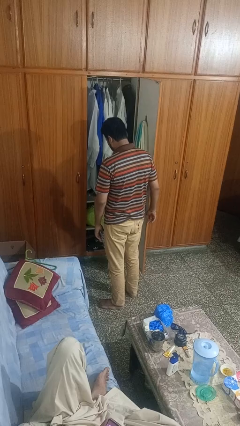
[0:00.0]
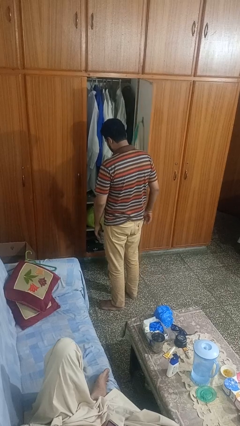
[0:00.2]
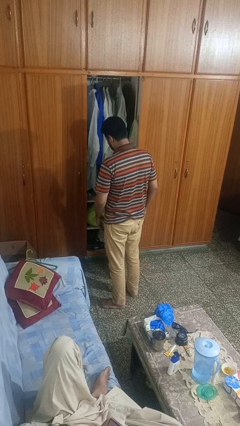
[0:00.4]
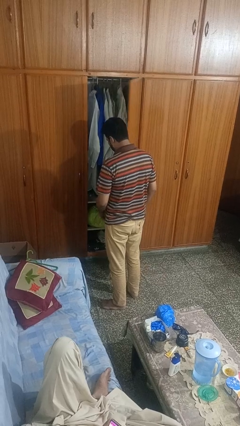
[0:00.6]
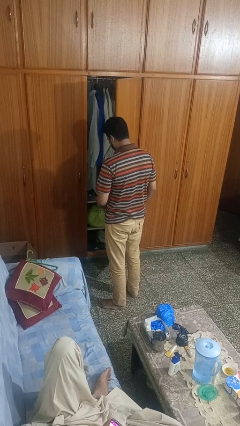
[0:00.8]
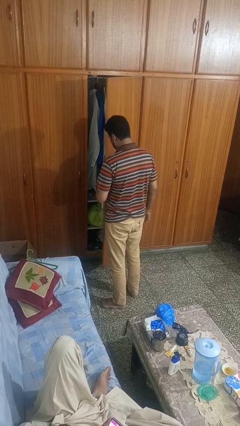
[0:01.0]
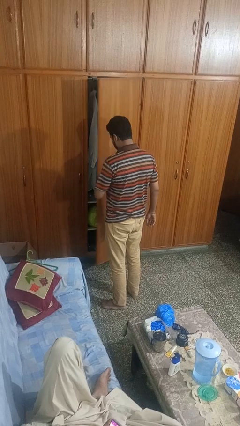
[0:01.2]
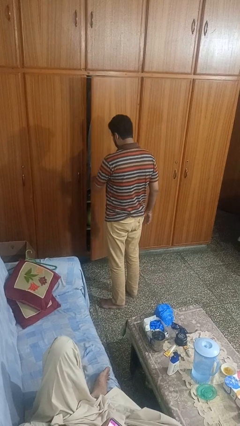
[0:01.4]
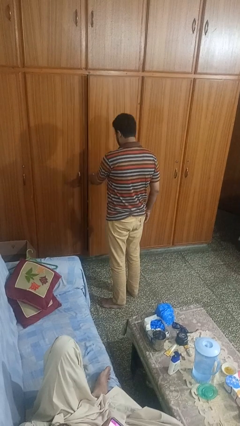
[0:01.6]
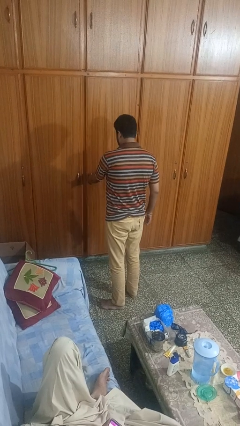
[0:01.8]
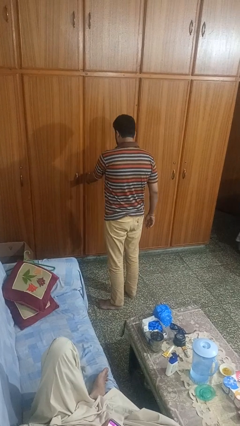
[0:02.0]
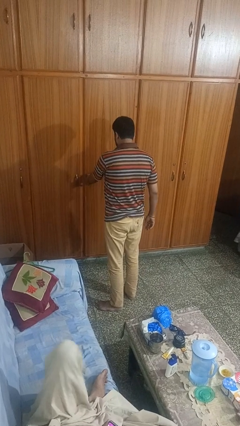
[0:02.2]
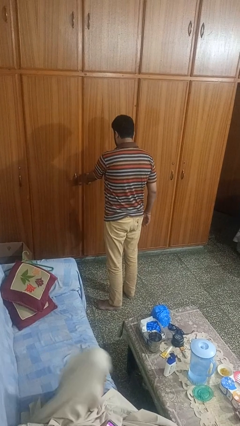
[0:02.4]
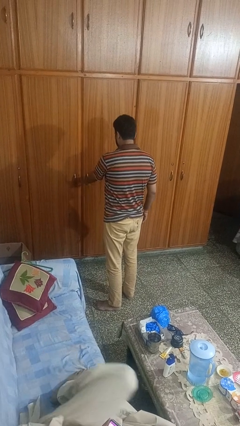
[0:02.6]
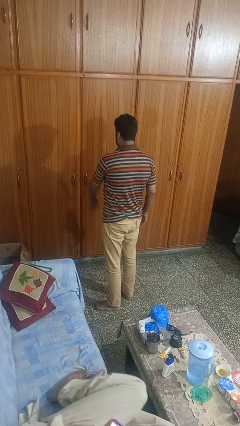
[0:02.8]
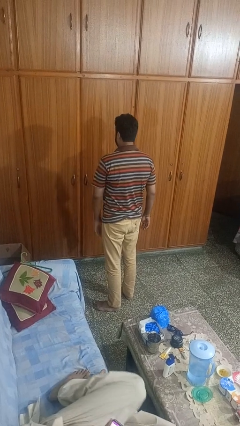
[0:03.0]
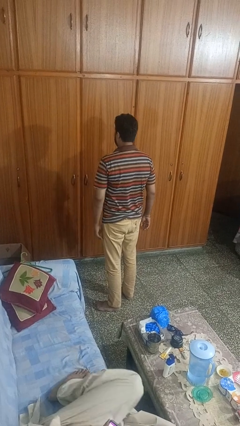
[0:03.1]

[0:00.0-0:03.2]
person closes closet door

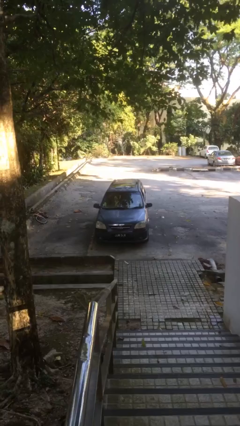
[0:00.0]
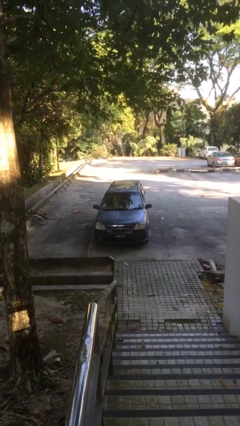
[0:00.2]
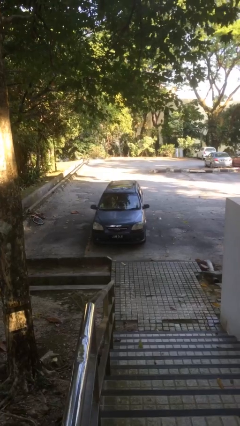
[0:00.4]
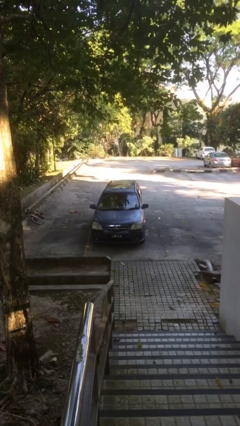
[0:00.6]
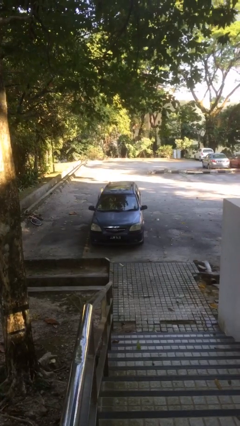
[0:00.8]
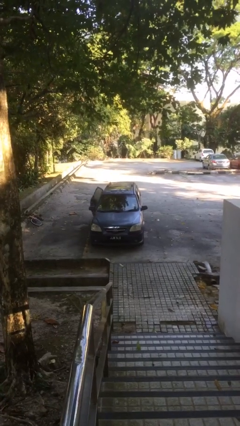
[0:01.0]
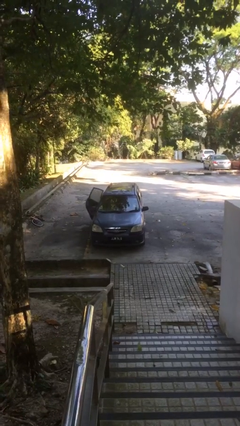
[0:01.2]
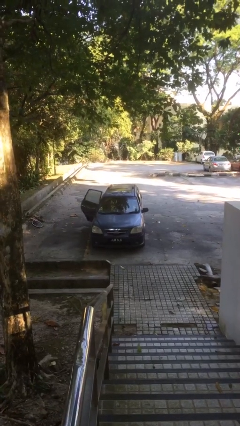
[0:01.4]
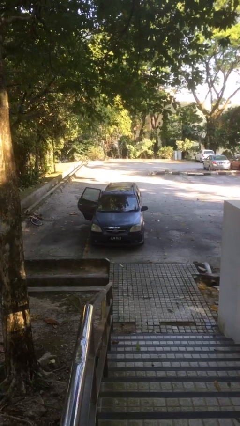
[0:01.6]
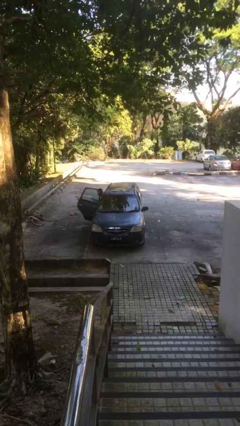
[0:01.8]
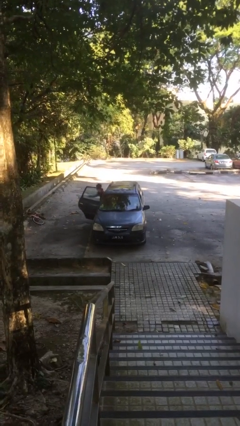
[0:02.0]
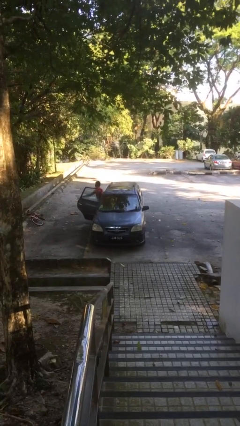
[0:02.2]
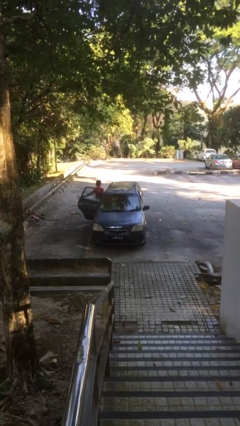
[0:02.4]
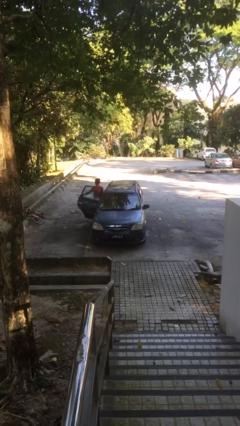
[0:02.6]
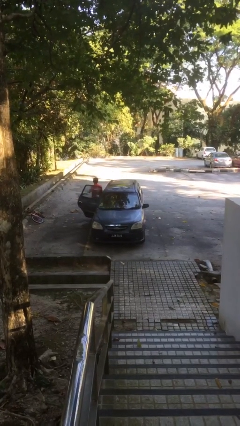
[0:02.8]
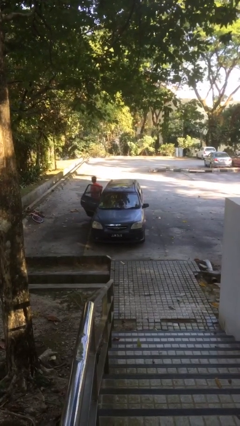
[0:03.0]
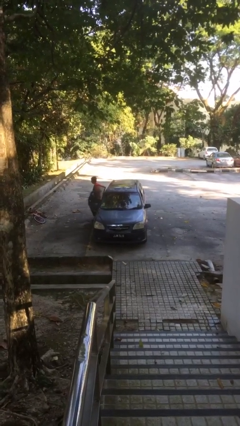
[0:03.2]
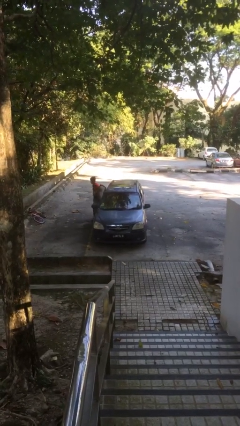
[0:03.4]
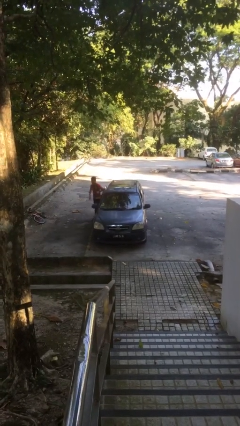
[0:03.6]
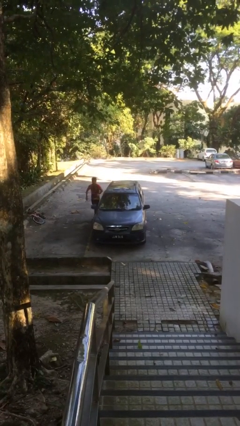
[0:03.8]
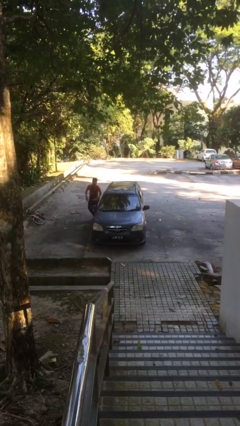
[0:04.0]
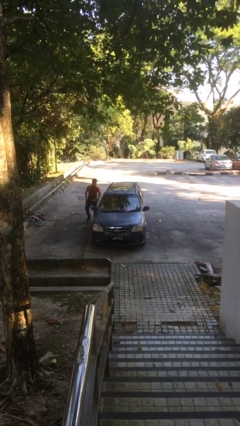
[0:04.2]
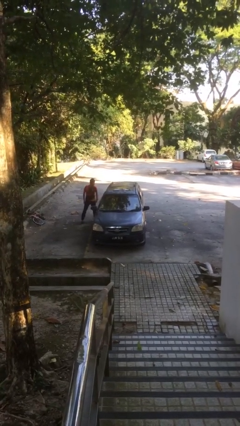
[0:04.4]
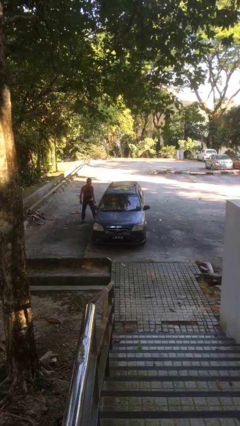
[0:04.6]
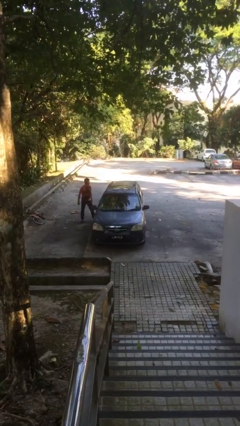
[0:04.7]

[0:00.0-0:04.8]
car drops off person

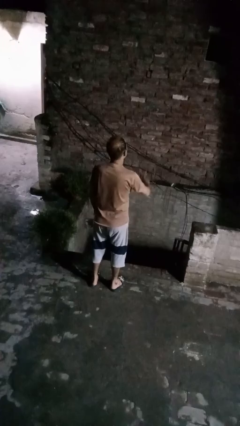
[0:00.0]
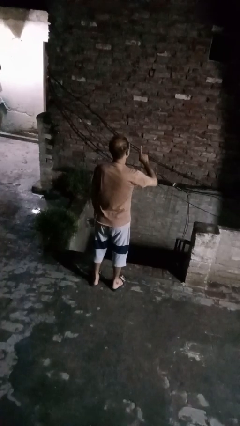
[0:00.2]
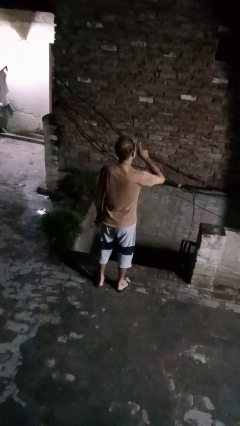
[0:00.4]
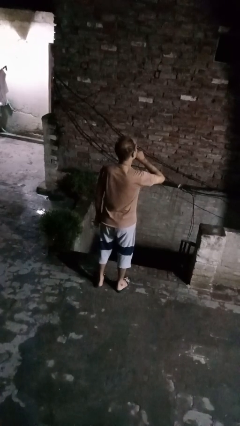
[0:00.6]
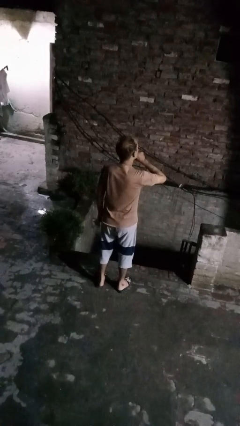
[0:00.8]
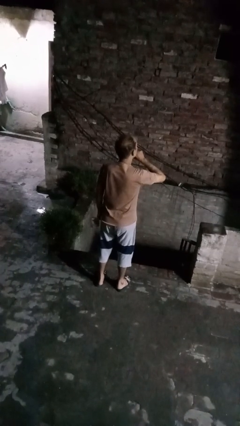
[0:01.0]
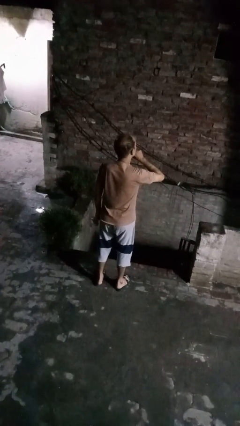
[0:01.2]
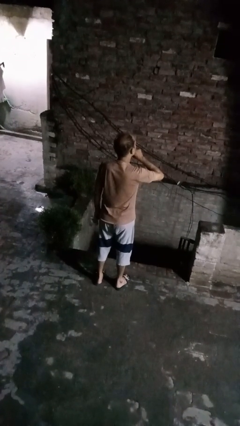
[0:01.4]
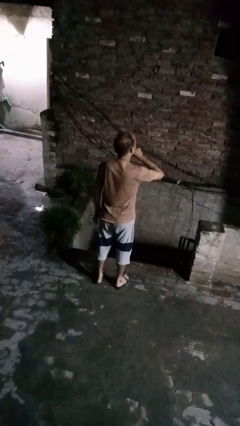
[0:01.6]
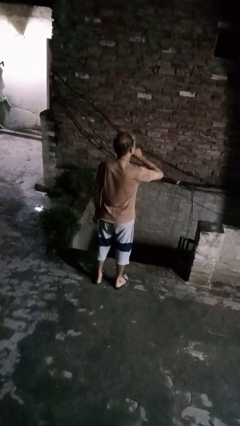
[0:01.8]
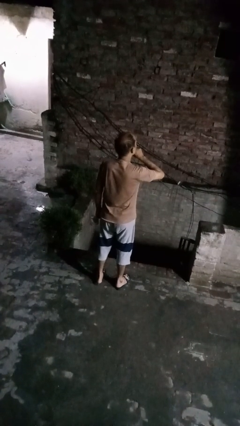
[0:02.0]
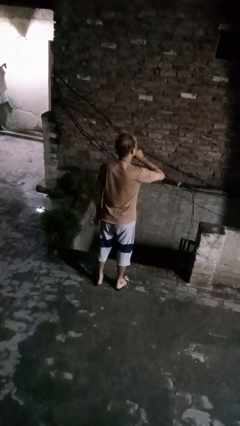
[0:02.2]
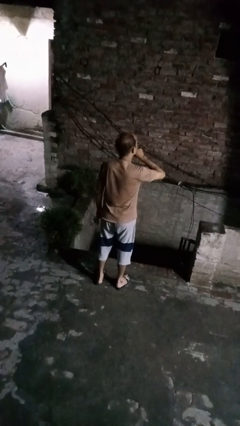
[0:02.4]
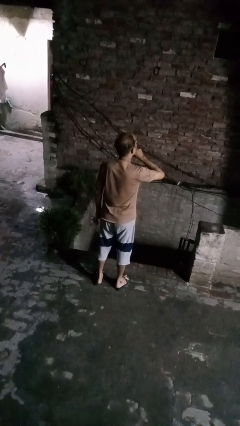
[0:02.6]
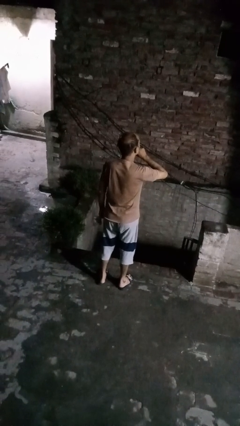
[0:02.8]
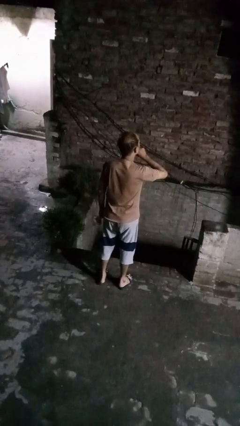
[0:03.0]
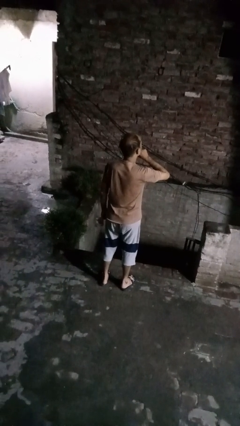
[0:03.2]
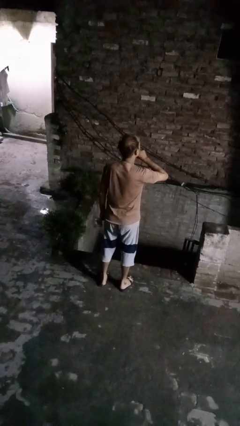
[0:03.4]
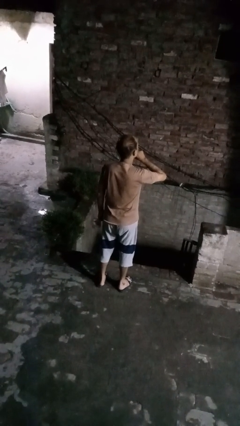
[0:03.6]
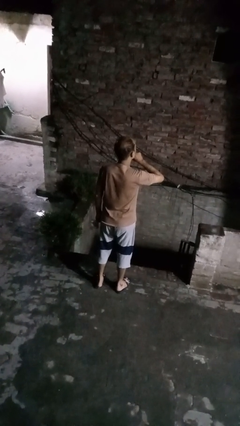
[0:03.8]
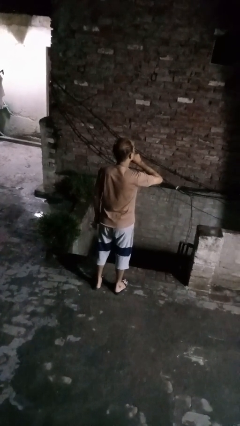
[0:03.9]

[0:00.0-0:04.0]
person gestures be quiet

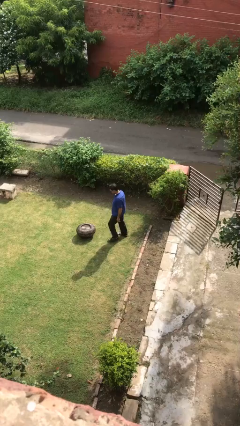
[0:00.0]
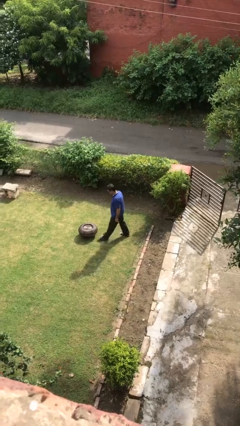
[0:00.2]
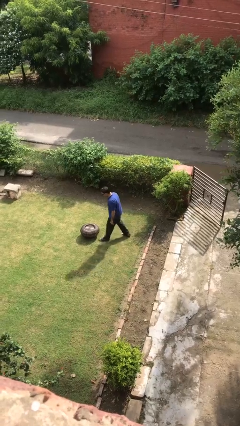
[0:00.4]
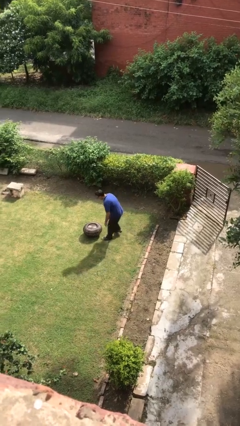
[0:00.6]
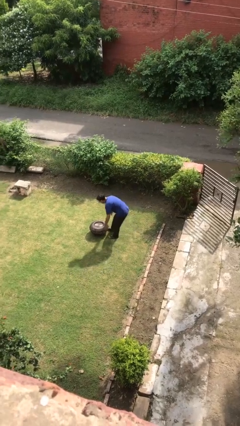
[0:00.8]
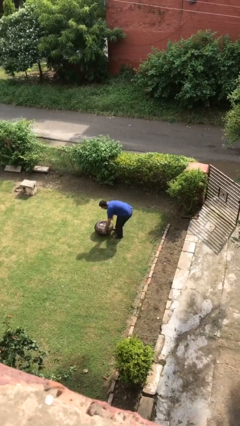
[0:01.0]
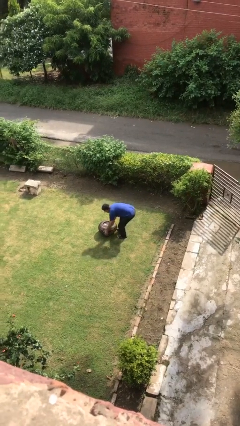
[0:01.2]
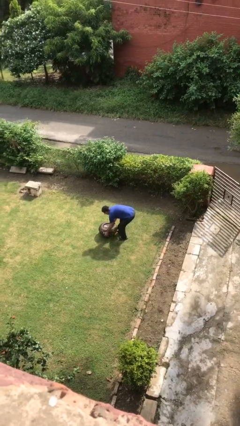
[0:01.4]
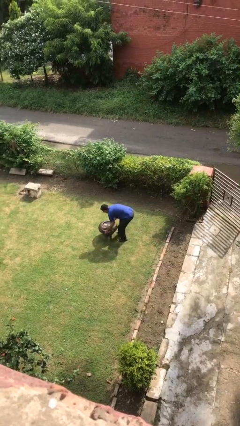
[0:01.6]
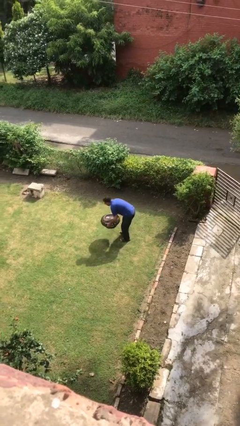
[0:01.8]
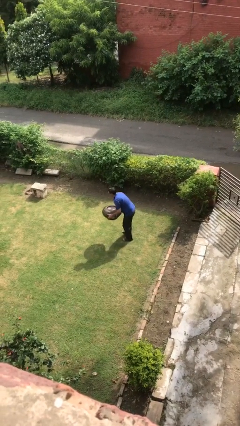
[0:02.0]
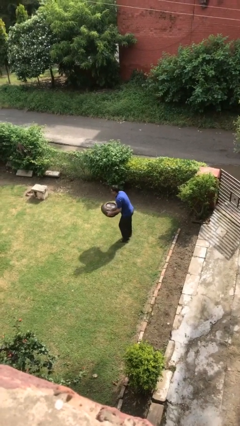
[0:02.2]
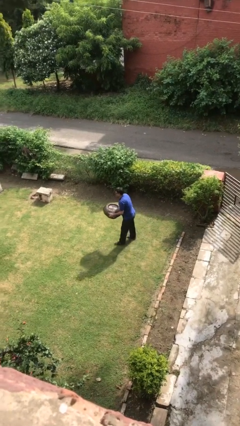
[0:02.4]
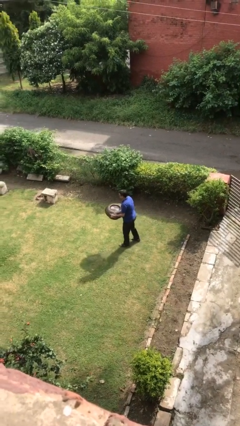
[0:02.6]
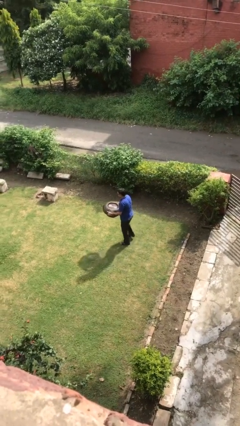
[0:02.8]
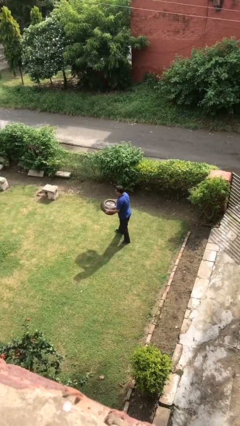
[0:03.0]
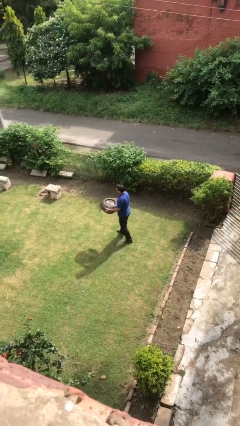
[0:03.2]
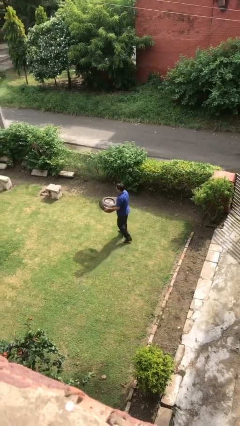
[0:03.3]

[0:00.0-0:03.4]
person picks up object from floor

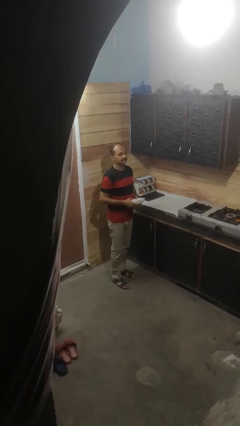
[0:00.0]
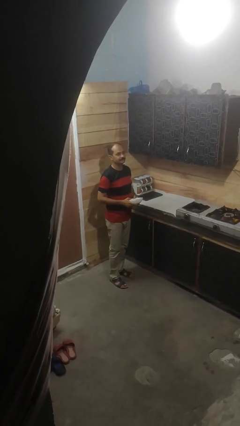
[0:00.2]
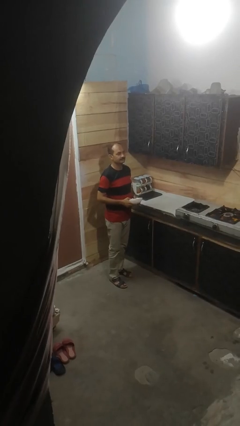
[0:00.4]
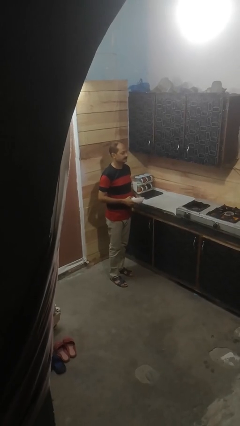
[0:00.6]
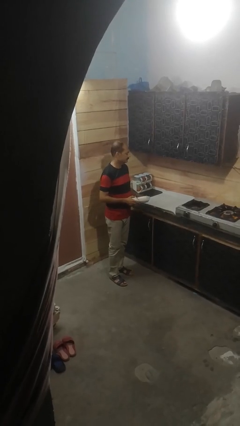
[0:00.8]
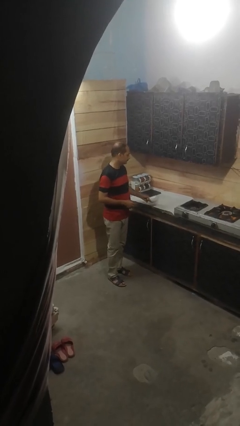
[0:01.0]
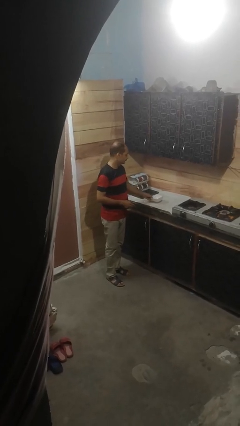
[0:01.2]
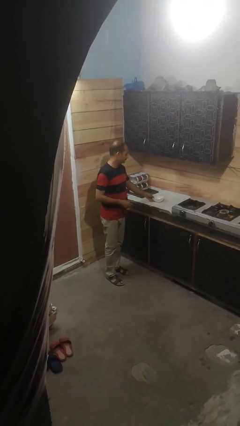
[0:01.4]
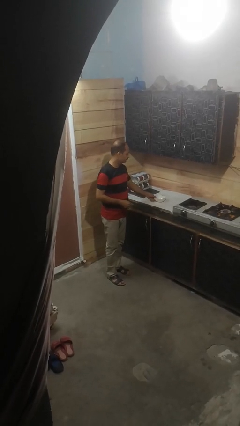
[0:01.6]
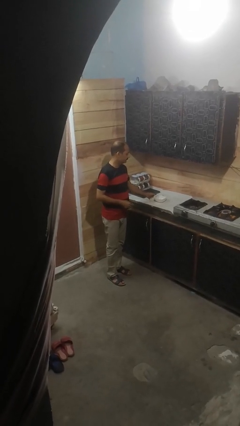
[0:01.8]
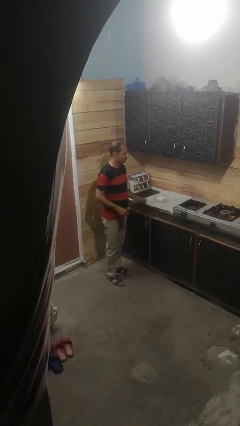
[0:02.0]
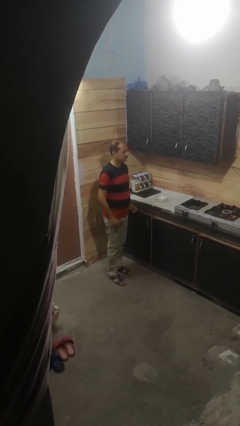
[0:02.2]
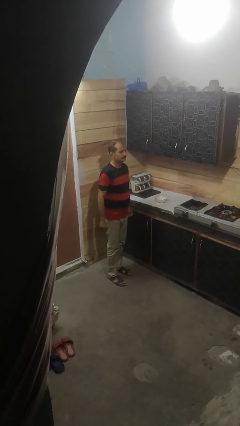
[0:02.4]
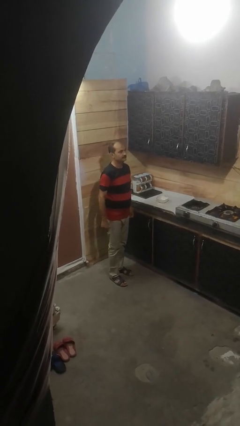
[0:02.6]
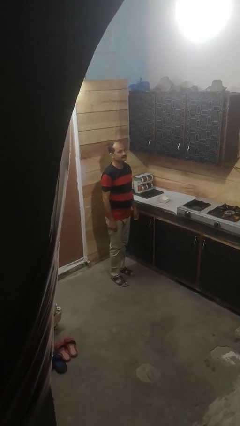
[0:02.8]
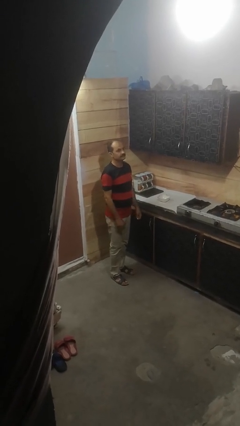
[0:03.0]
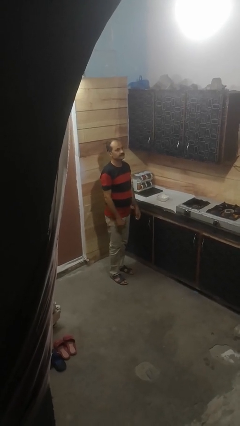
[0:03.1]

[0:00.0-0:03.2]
person puts down object on countertop
